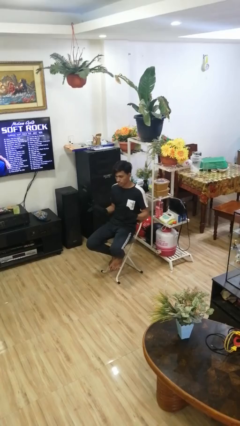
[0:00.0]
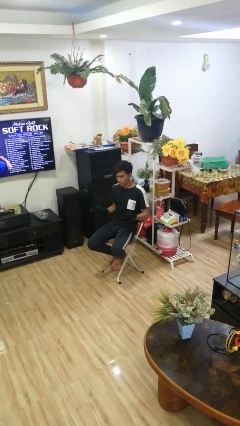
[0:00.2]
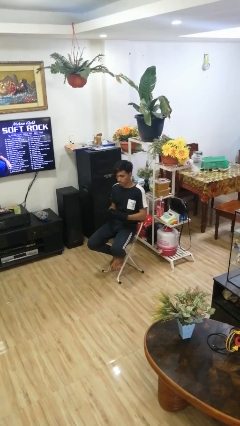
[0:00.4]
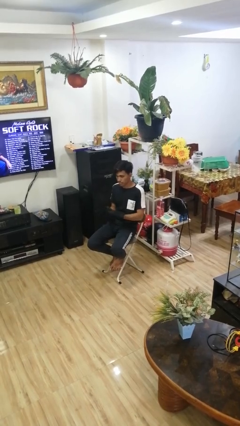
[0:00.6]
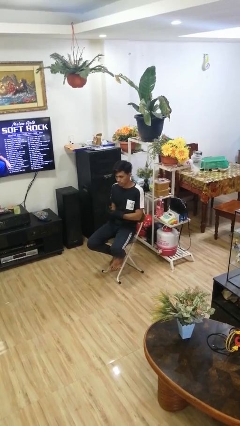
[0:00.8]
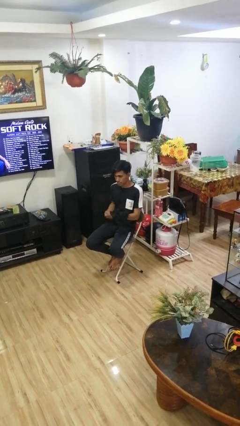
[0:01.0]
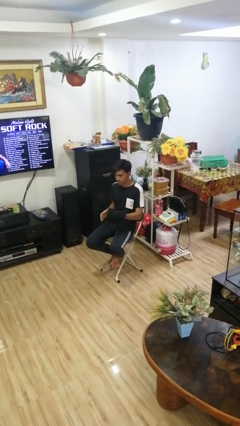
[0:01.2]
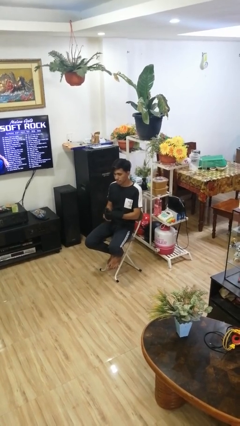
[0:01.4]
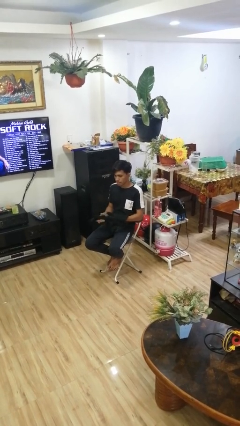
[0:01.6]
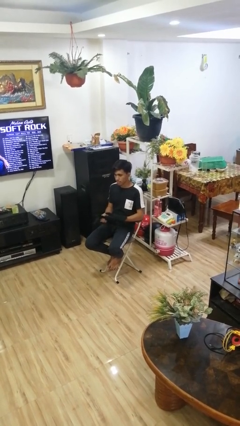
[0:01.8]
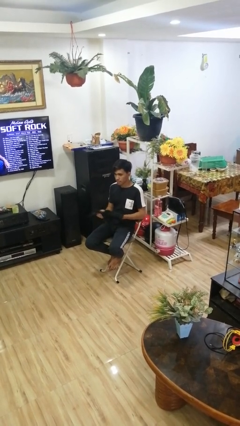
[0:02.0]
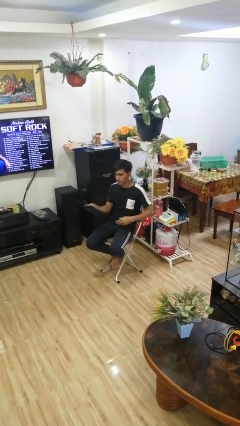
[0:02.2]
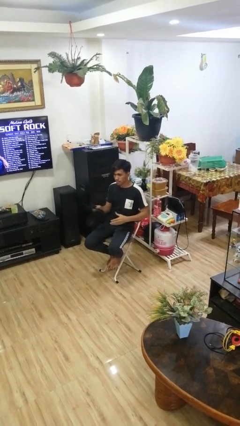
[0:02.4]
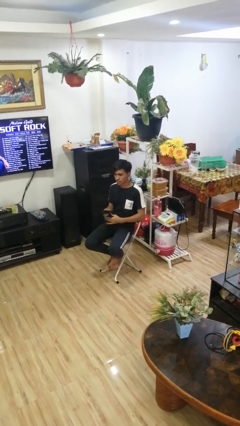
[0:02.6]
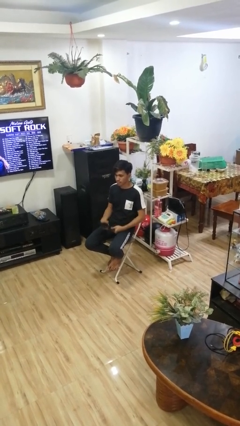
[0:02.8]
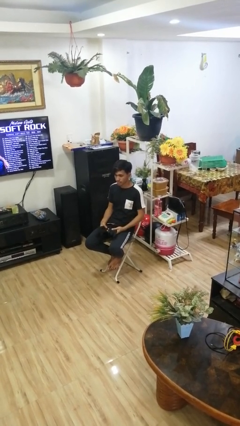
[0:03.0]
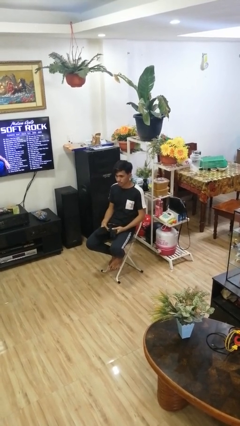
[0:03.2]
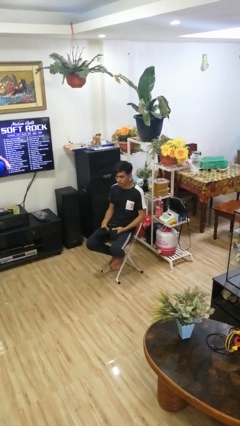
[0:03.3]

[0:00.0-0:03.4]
person takes off gloves

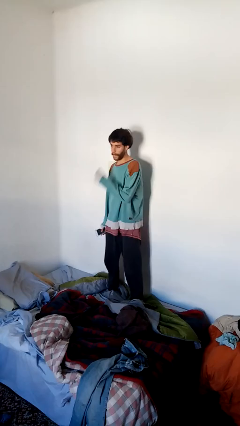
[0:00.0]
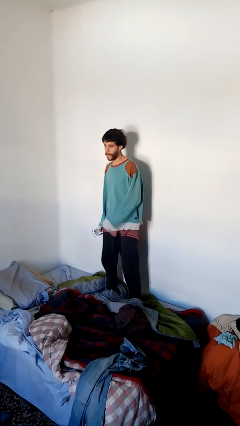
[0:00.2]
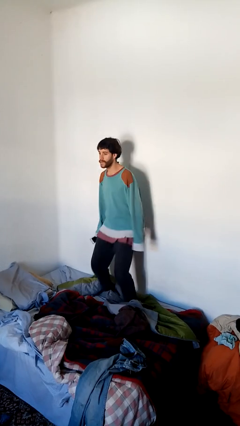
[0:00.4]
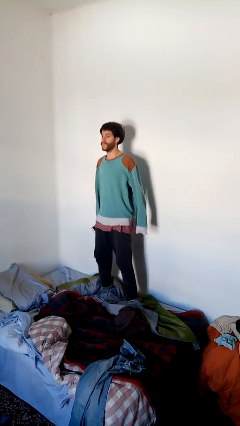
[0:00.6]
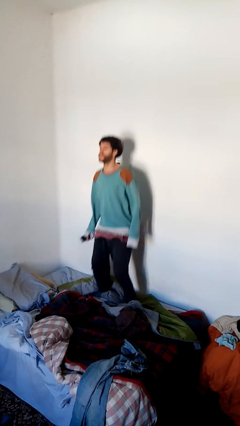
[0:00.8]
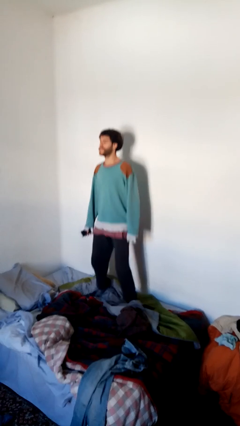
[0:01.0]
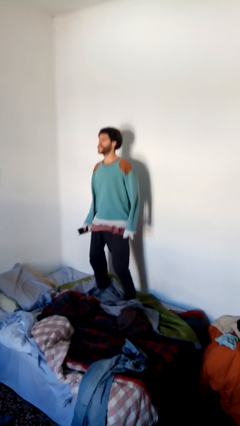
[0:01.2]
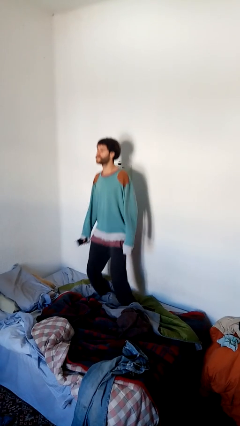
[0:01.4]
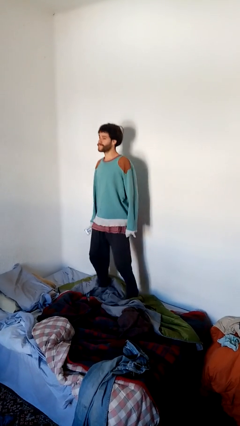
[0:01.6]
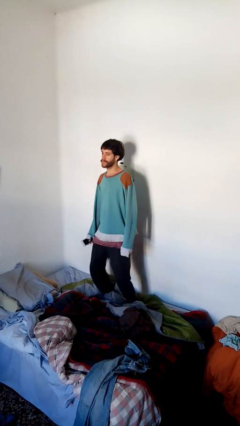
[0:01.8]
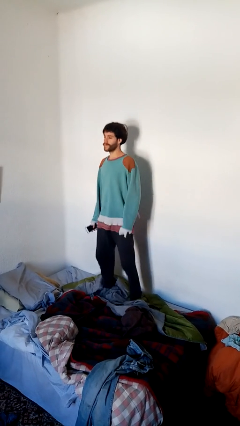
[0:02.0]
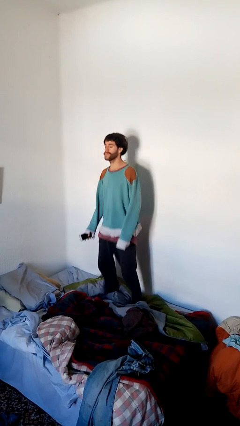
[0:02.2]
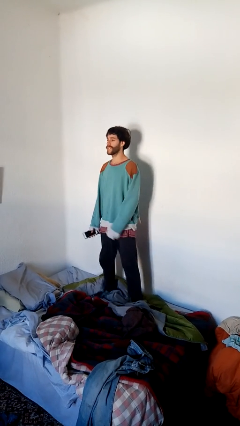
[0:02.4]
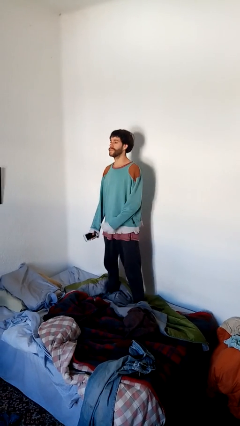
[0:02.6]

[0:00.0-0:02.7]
person jumps on bed

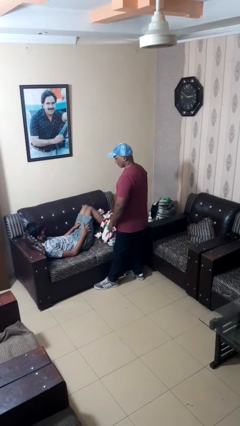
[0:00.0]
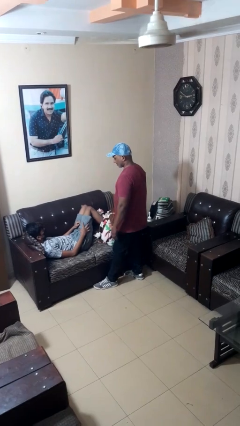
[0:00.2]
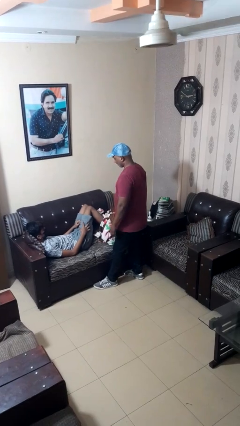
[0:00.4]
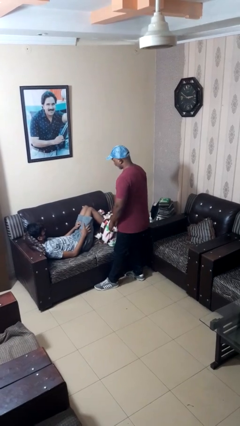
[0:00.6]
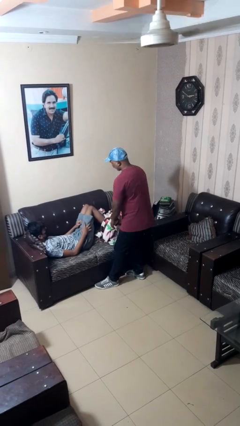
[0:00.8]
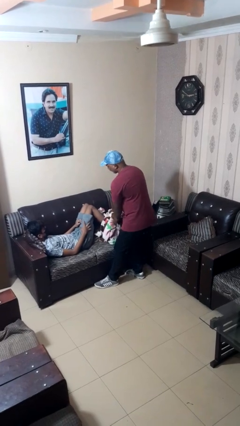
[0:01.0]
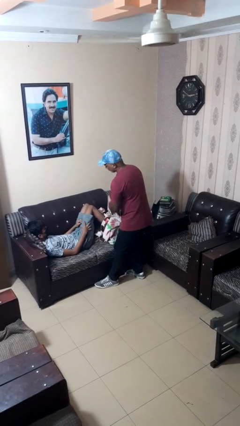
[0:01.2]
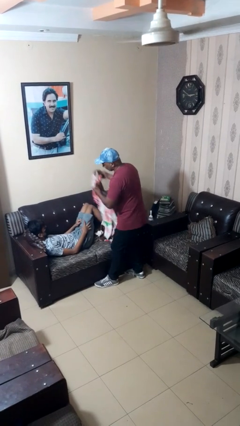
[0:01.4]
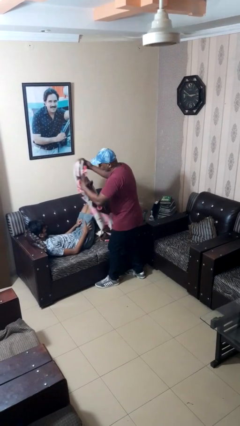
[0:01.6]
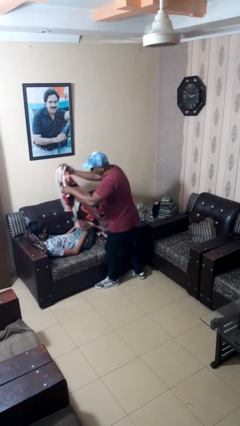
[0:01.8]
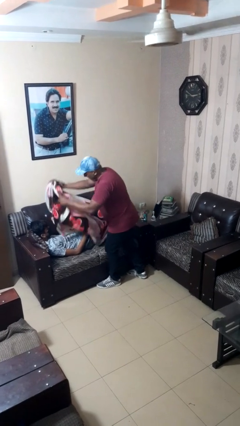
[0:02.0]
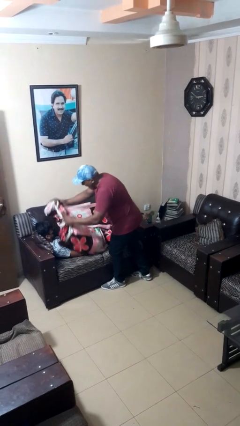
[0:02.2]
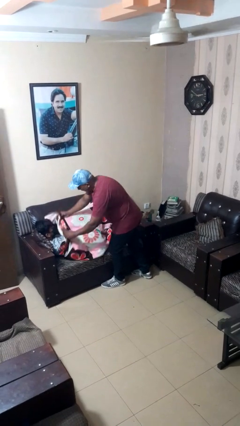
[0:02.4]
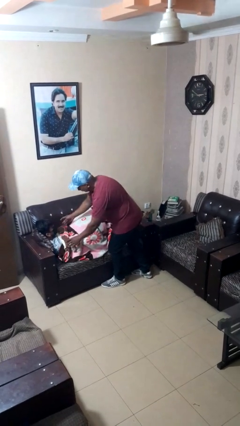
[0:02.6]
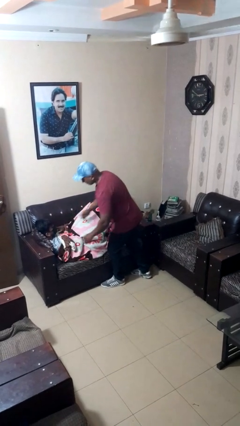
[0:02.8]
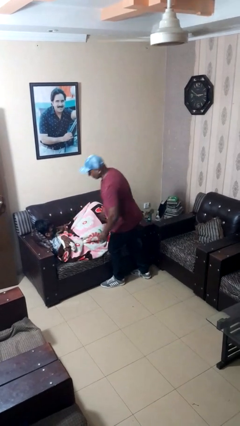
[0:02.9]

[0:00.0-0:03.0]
person covers friend with blanket

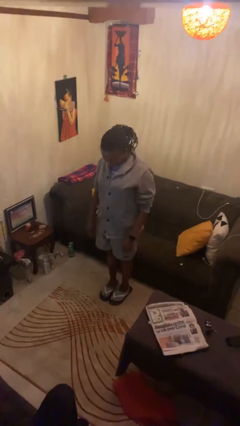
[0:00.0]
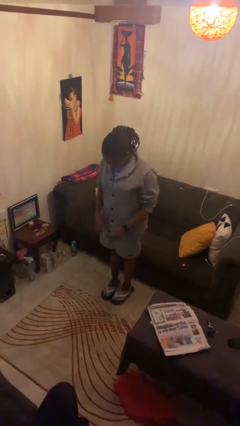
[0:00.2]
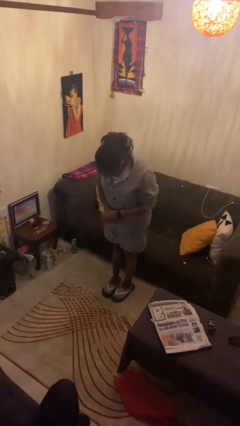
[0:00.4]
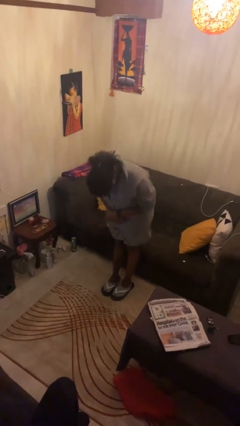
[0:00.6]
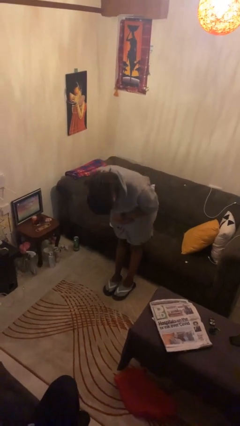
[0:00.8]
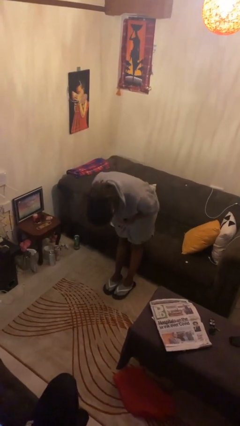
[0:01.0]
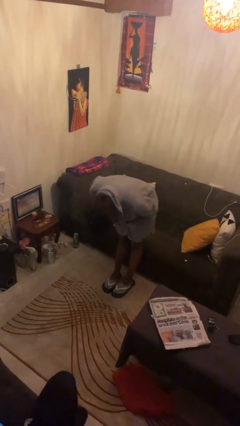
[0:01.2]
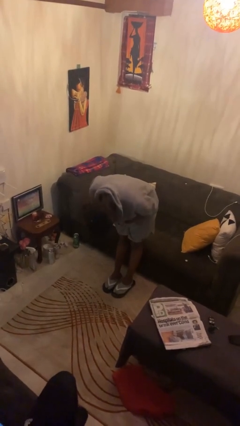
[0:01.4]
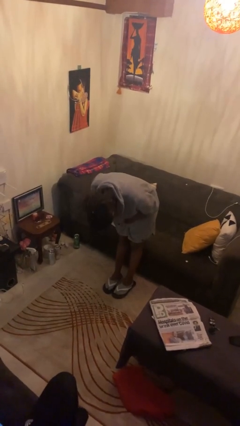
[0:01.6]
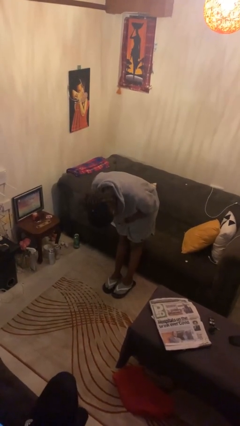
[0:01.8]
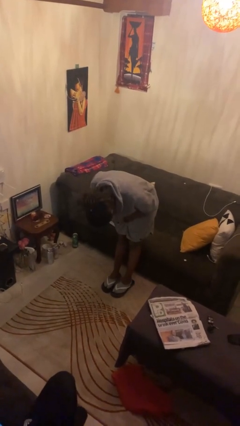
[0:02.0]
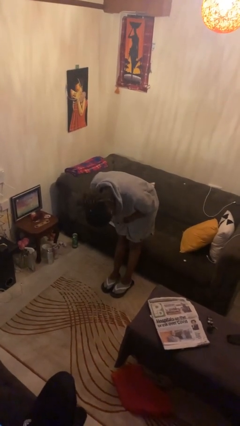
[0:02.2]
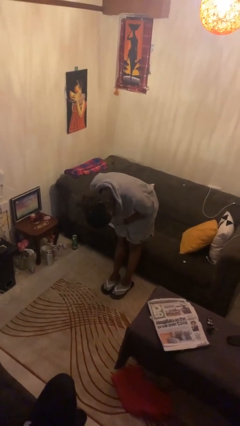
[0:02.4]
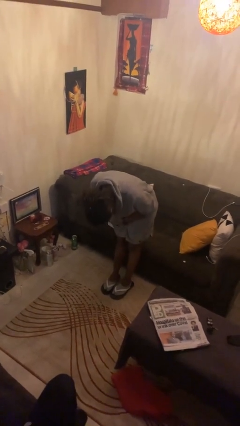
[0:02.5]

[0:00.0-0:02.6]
person bows

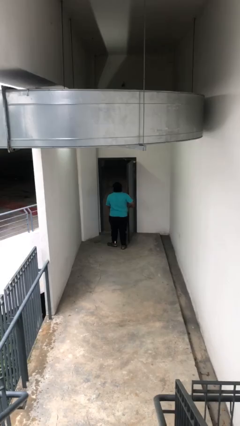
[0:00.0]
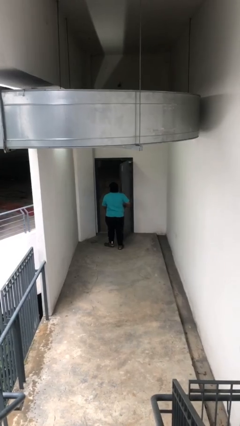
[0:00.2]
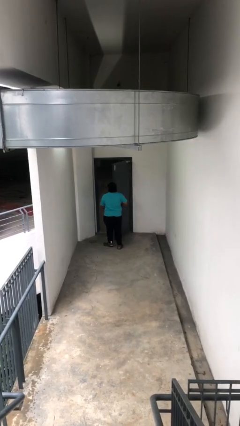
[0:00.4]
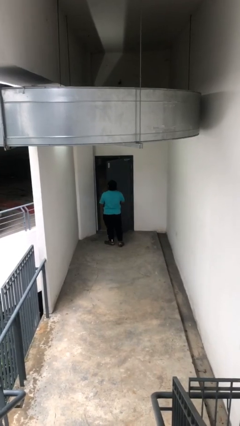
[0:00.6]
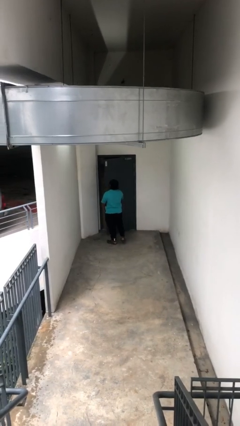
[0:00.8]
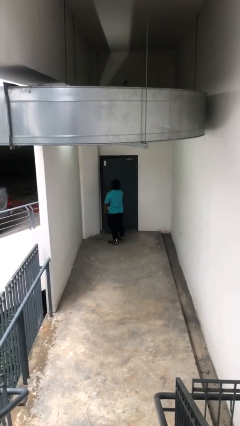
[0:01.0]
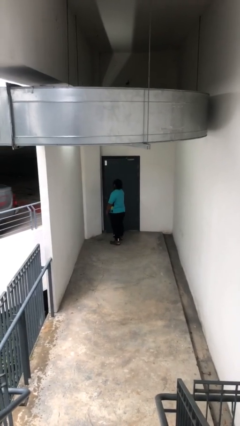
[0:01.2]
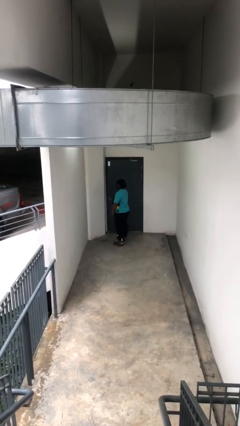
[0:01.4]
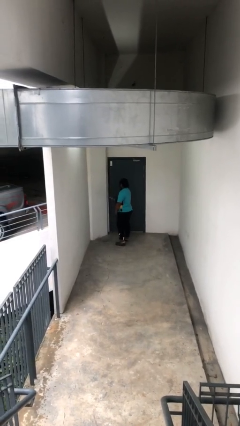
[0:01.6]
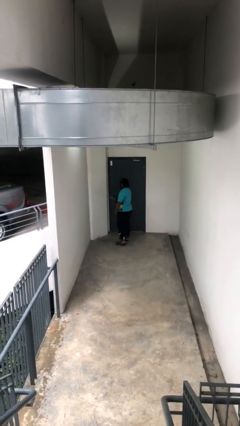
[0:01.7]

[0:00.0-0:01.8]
person closes facility door

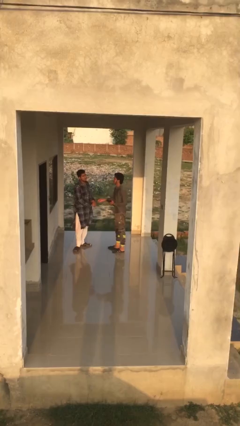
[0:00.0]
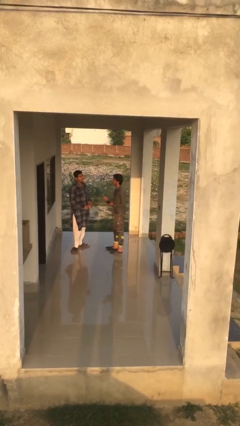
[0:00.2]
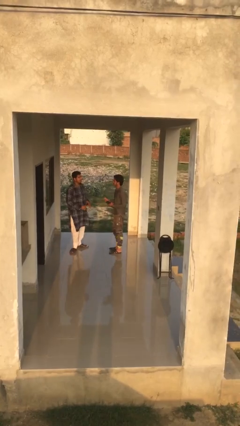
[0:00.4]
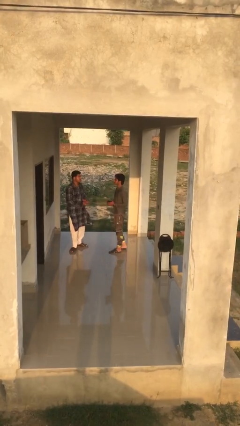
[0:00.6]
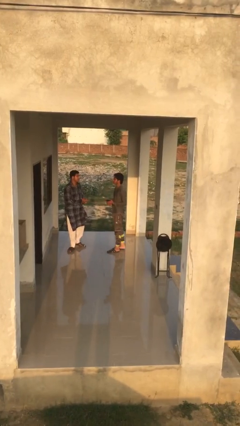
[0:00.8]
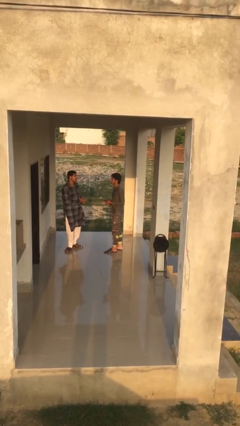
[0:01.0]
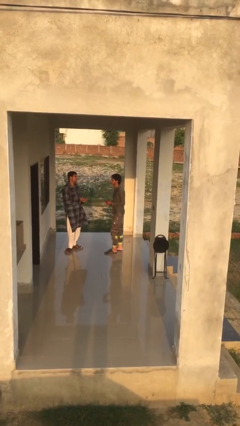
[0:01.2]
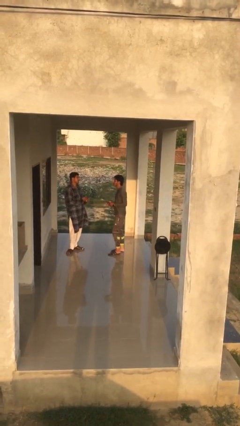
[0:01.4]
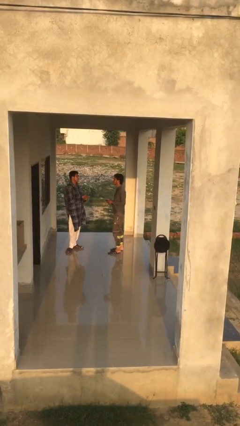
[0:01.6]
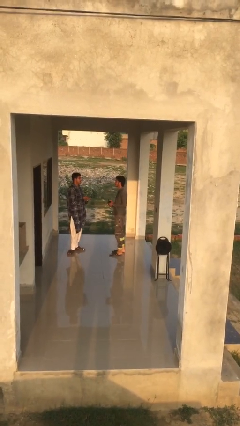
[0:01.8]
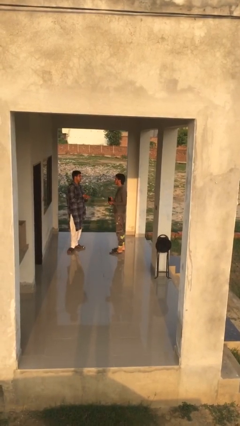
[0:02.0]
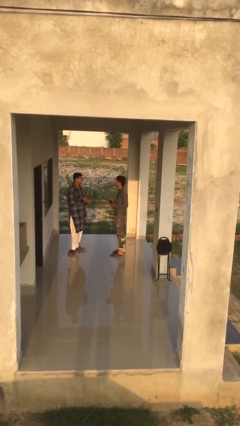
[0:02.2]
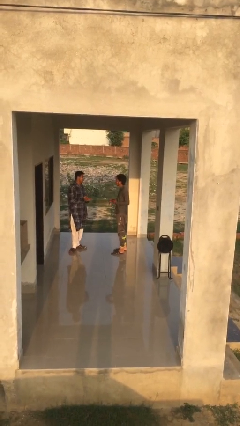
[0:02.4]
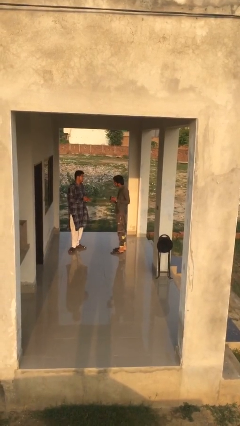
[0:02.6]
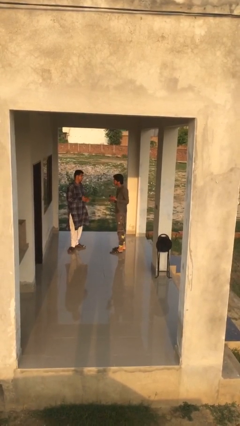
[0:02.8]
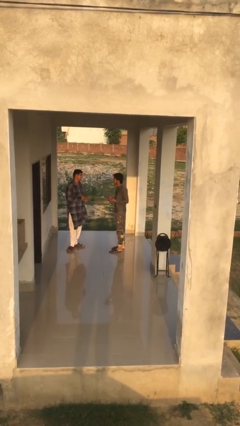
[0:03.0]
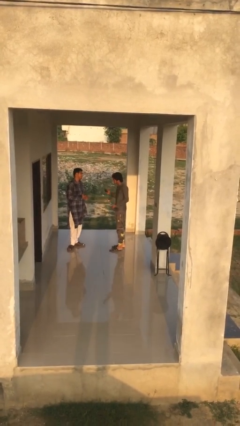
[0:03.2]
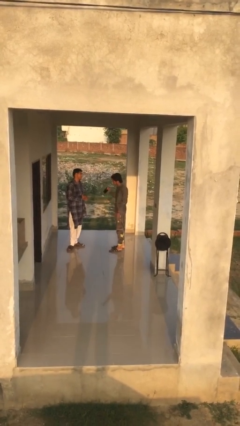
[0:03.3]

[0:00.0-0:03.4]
person talks to person

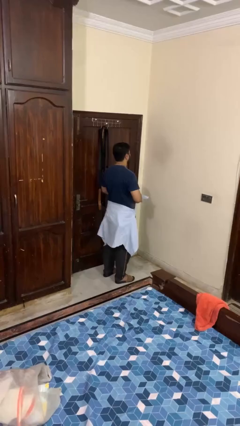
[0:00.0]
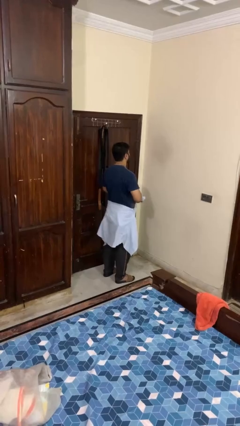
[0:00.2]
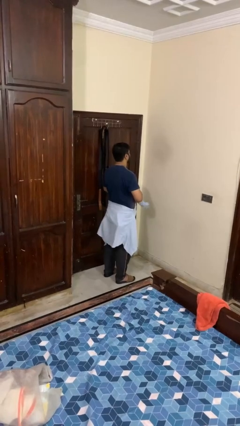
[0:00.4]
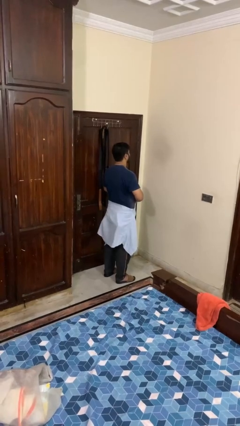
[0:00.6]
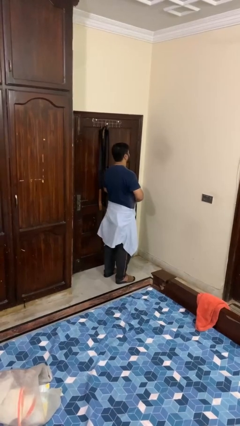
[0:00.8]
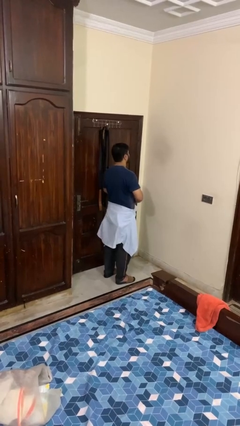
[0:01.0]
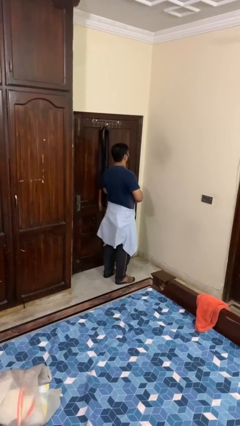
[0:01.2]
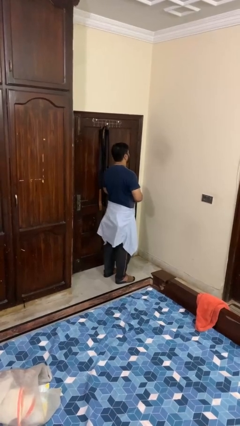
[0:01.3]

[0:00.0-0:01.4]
person ties jacket around waist
